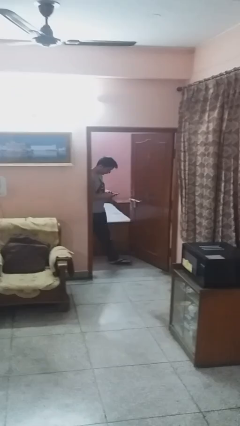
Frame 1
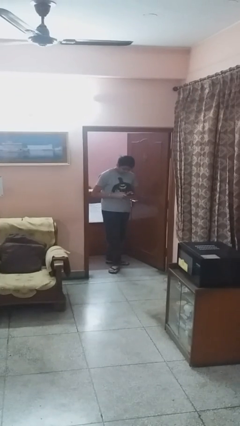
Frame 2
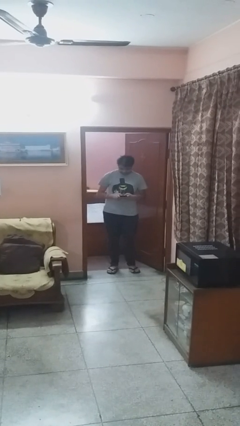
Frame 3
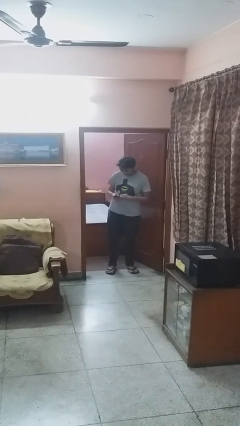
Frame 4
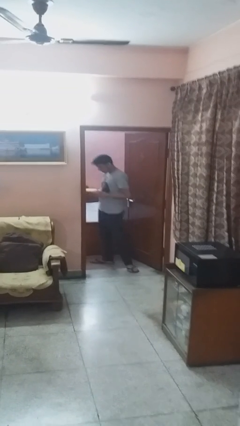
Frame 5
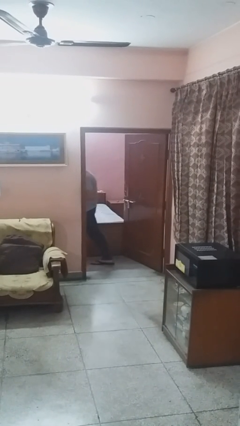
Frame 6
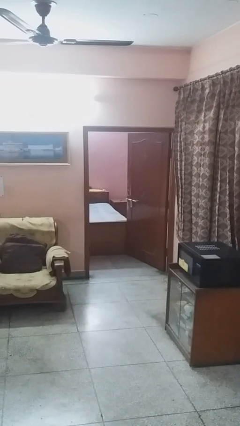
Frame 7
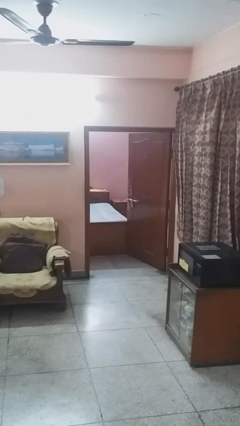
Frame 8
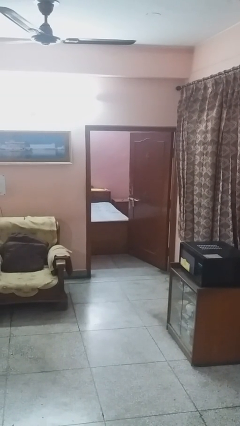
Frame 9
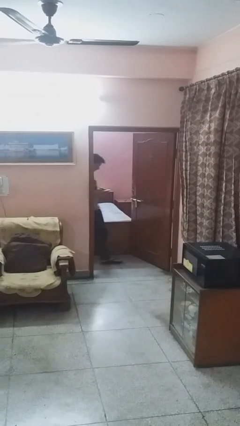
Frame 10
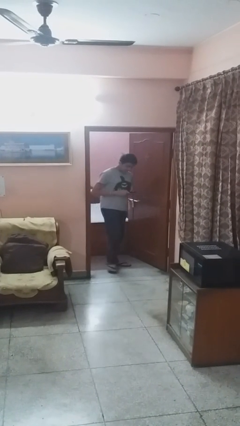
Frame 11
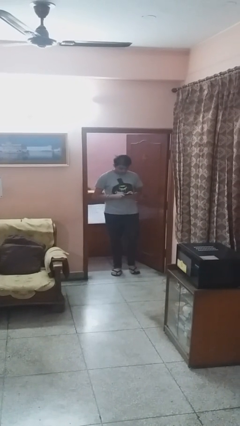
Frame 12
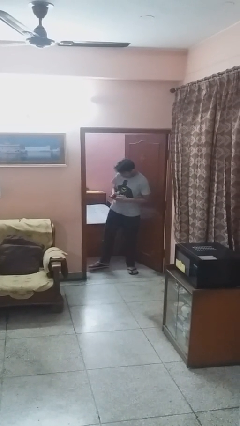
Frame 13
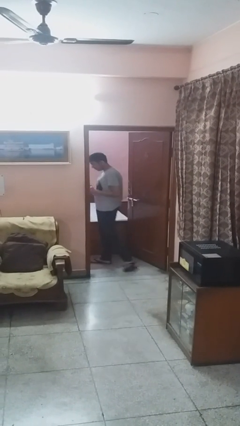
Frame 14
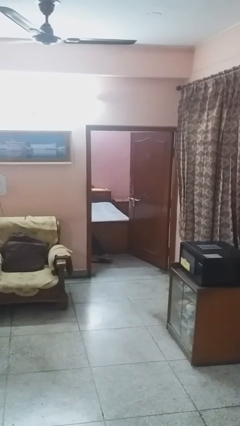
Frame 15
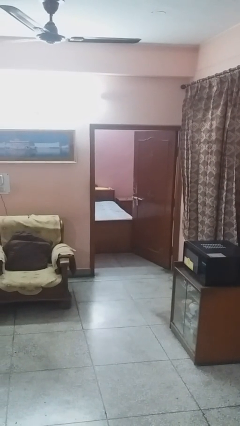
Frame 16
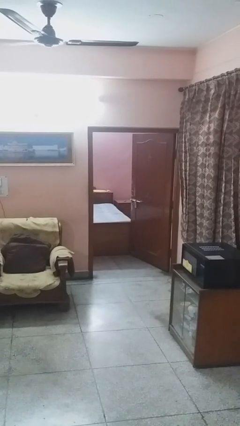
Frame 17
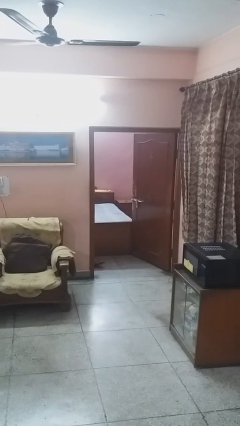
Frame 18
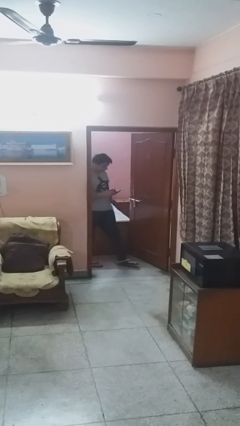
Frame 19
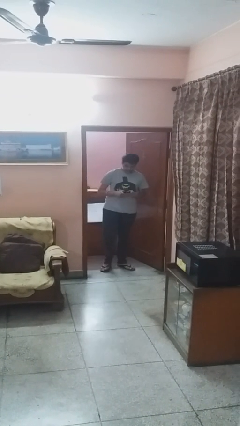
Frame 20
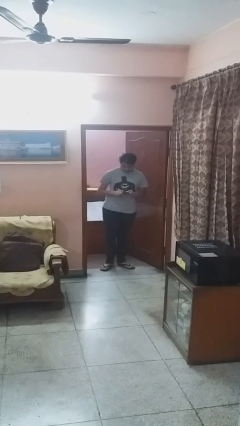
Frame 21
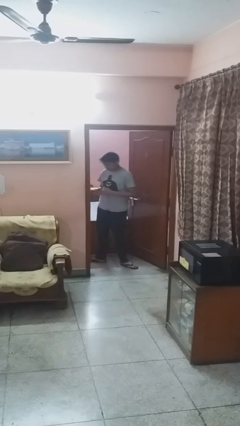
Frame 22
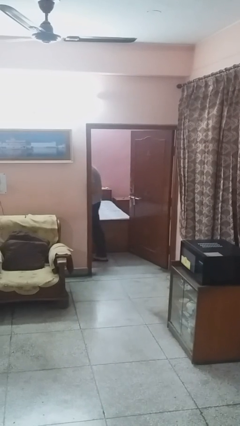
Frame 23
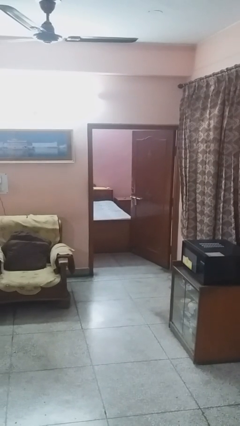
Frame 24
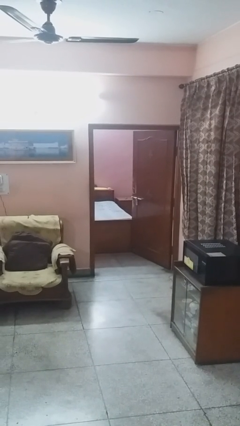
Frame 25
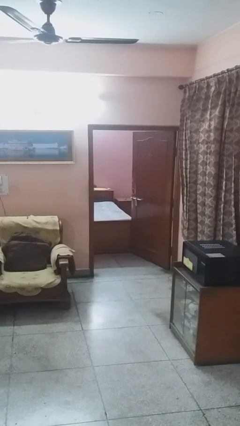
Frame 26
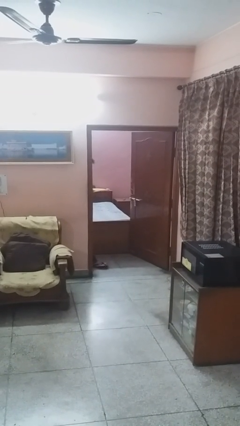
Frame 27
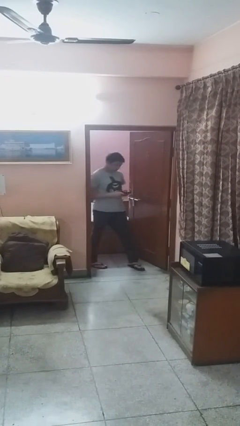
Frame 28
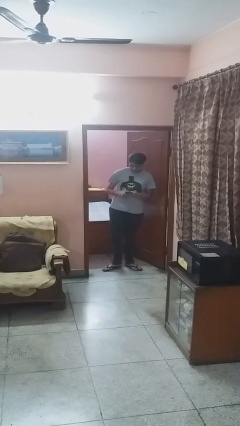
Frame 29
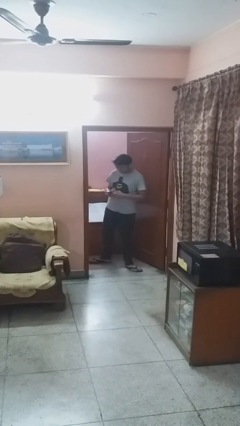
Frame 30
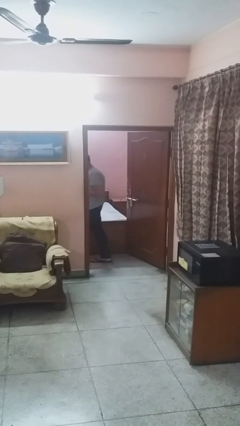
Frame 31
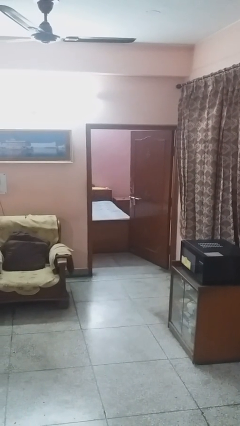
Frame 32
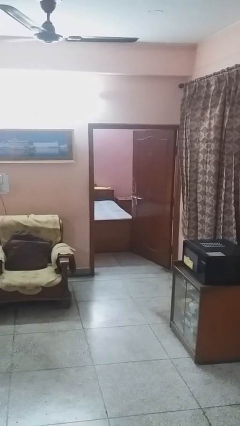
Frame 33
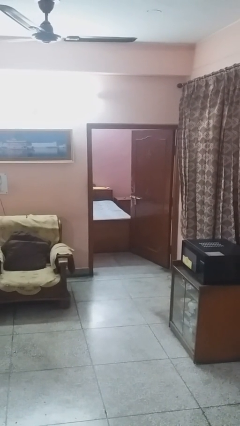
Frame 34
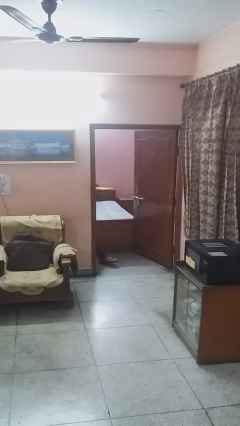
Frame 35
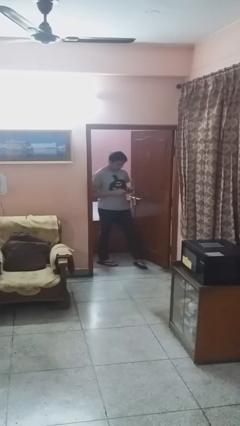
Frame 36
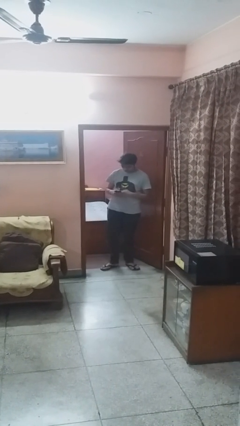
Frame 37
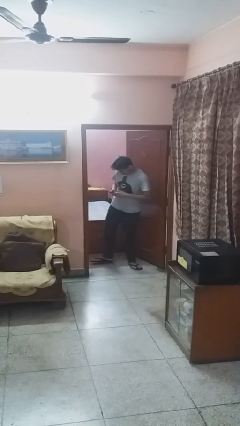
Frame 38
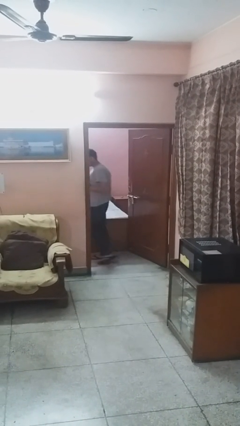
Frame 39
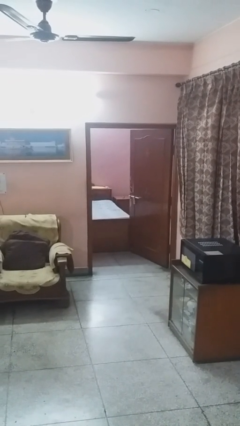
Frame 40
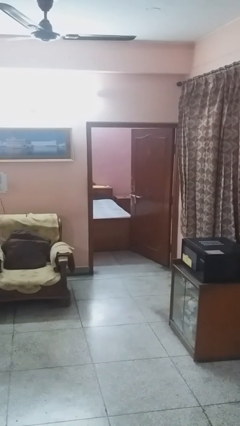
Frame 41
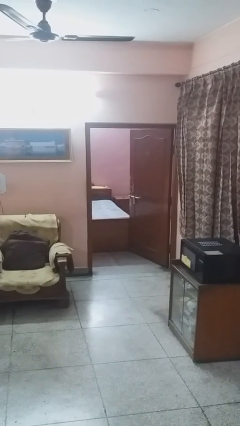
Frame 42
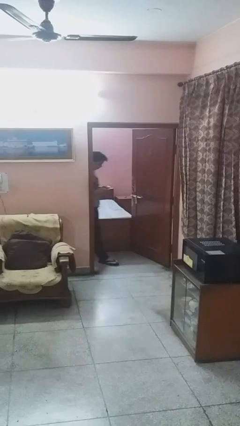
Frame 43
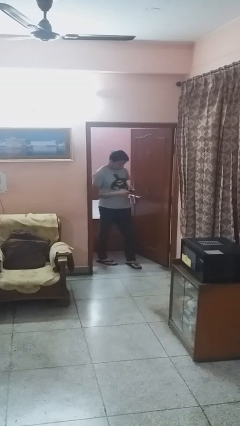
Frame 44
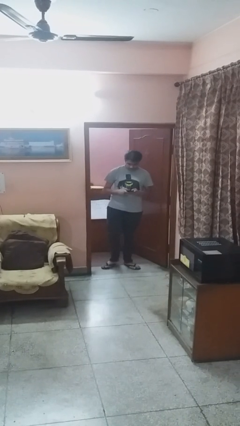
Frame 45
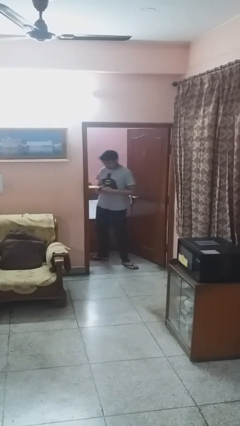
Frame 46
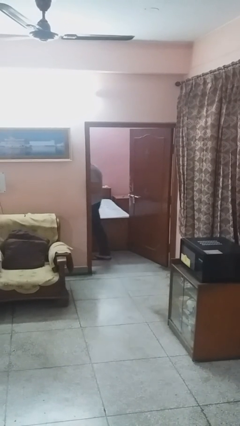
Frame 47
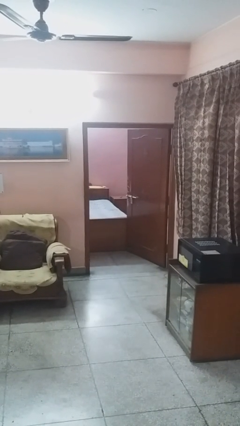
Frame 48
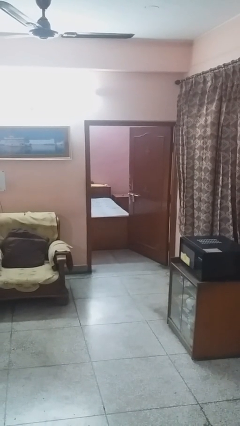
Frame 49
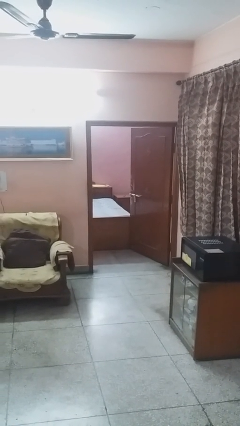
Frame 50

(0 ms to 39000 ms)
person texts on phone

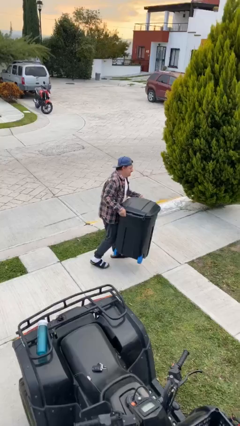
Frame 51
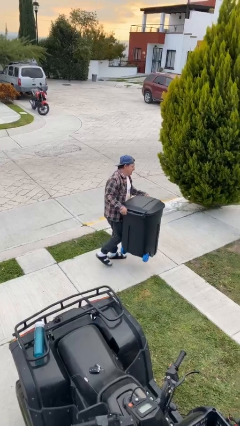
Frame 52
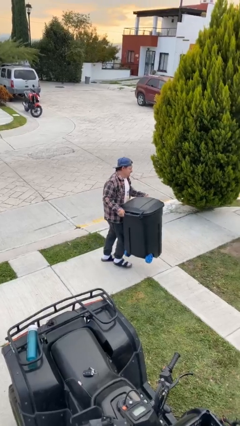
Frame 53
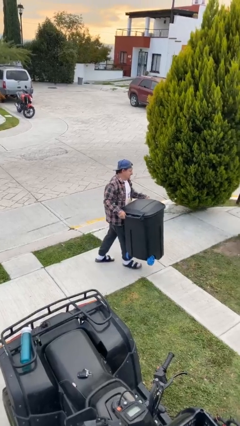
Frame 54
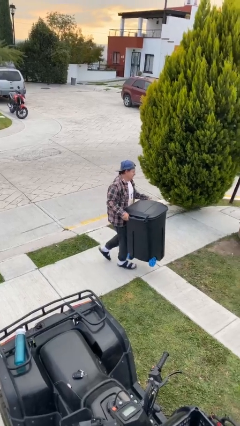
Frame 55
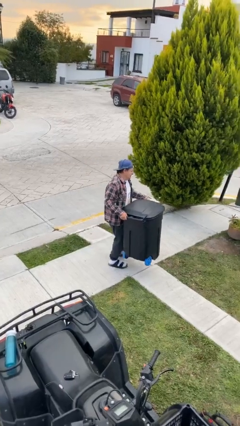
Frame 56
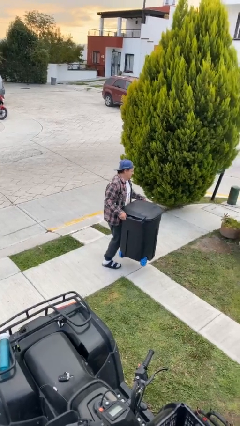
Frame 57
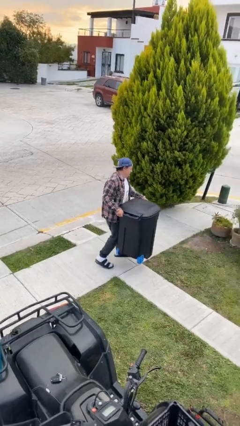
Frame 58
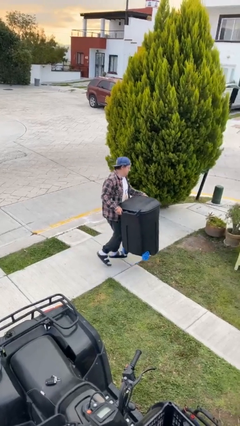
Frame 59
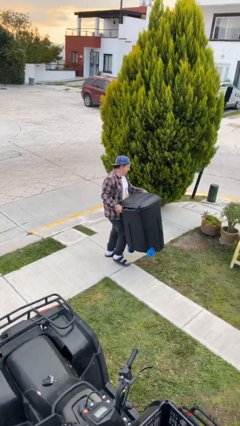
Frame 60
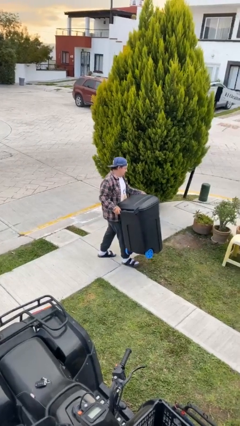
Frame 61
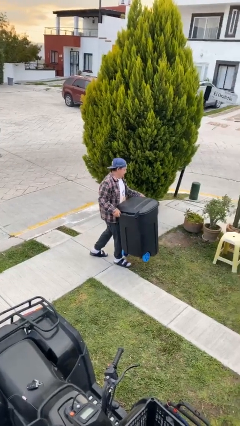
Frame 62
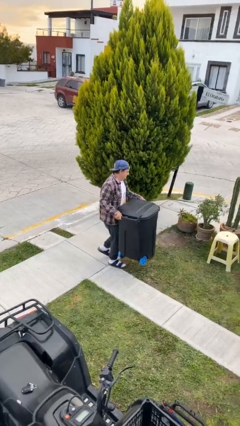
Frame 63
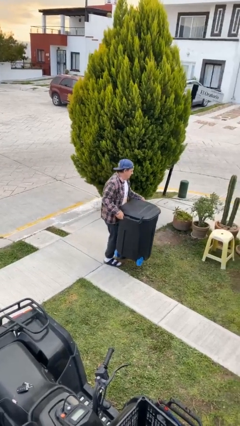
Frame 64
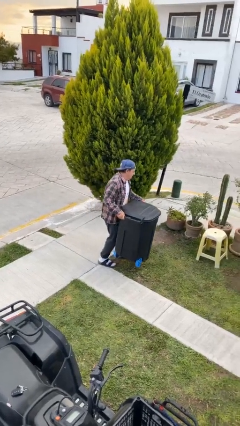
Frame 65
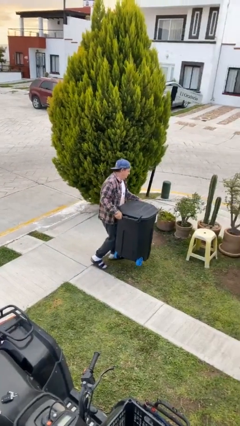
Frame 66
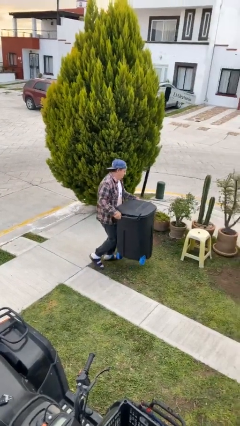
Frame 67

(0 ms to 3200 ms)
person carries heavy object

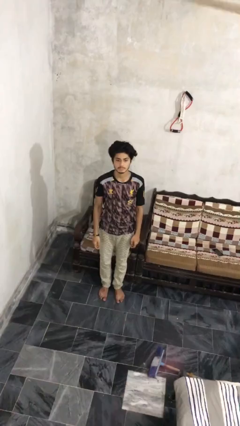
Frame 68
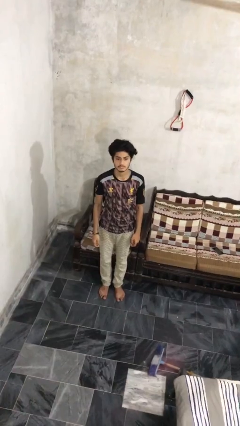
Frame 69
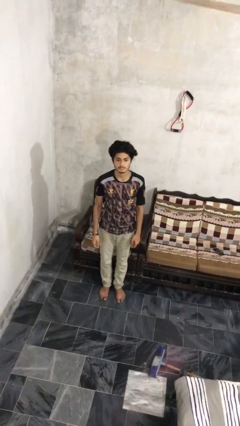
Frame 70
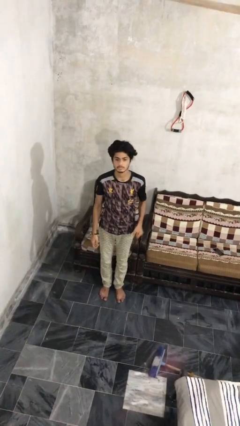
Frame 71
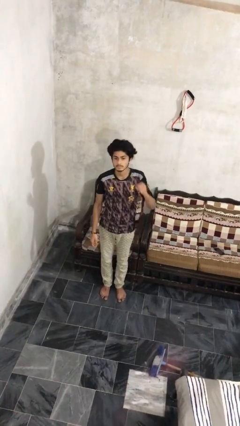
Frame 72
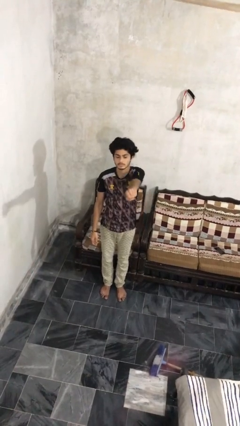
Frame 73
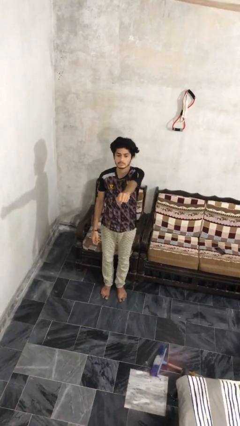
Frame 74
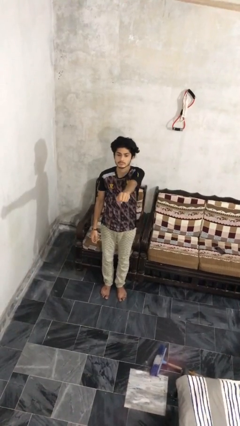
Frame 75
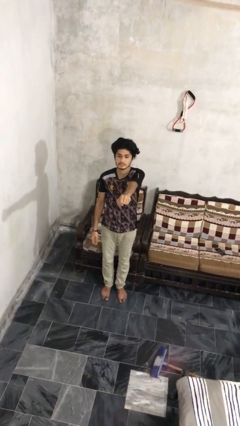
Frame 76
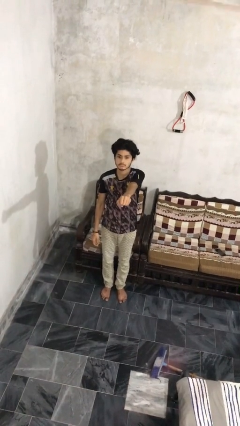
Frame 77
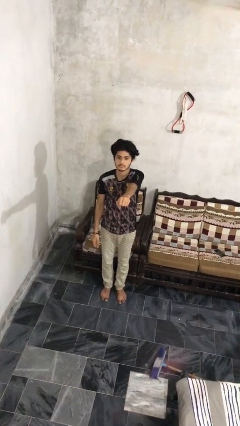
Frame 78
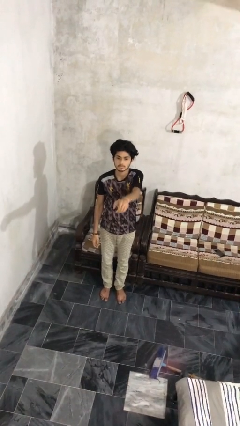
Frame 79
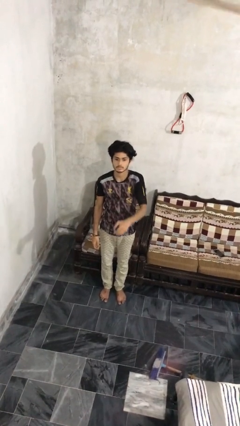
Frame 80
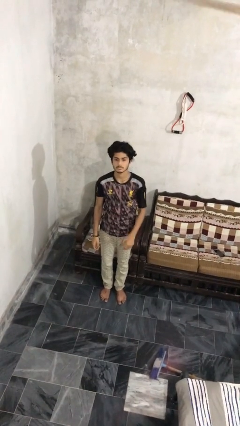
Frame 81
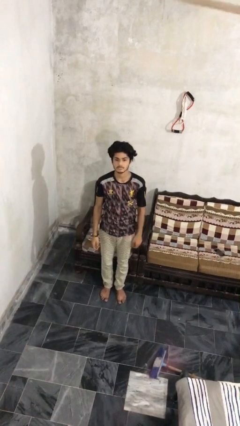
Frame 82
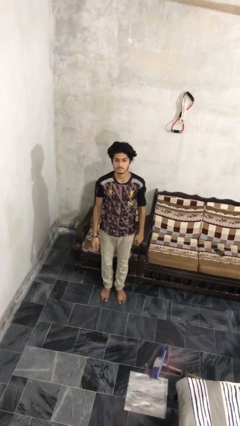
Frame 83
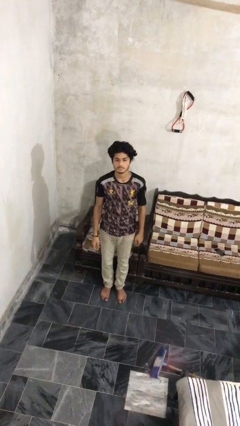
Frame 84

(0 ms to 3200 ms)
person punches

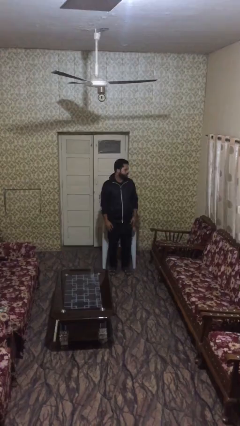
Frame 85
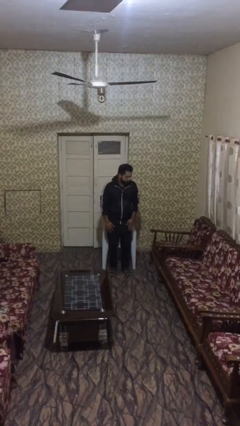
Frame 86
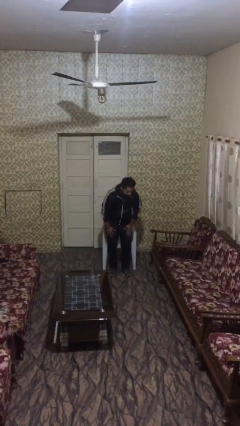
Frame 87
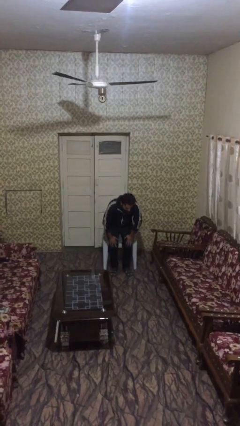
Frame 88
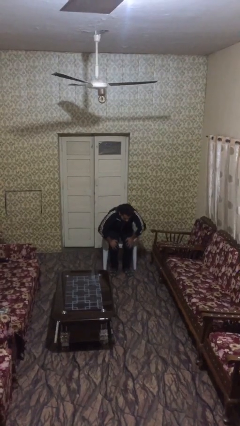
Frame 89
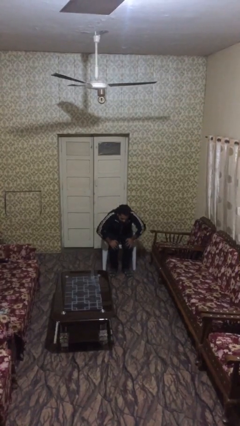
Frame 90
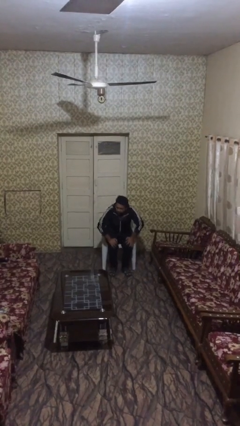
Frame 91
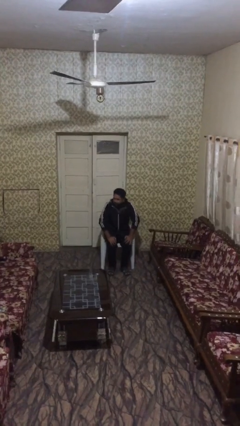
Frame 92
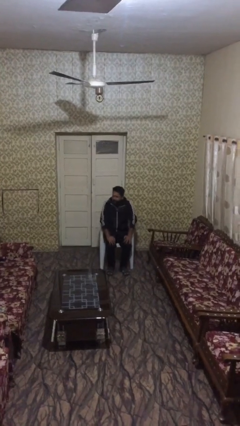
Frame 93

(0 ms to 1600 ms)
person sits down
